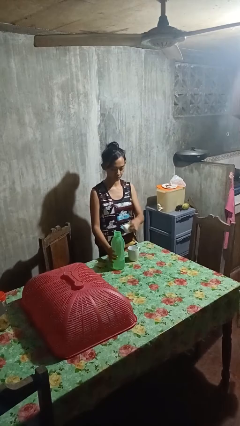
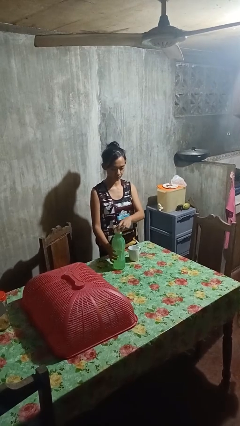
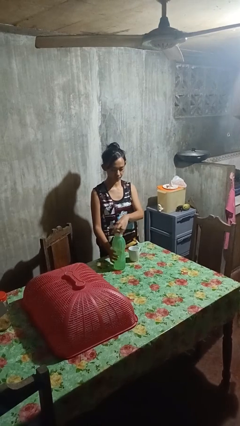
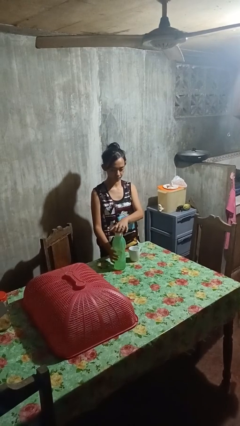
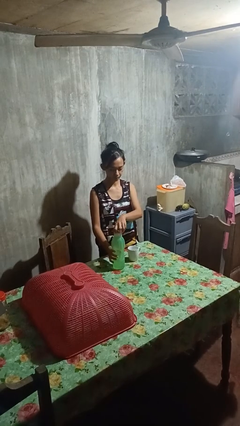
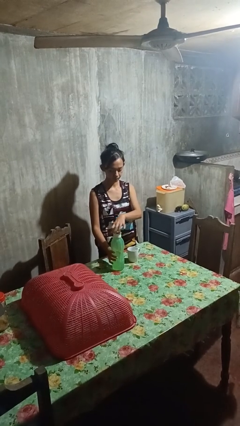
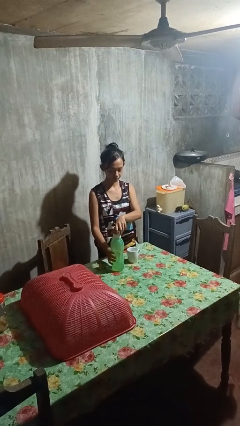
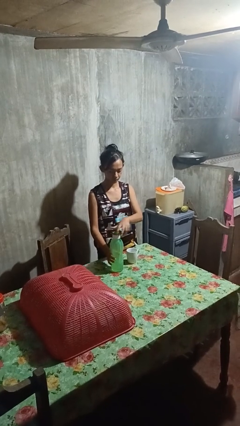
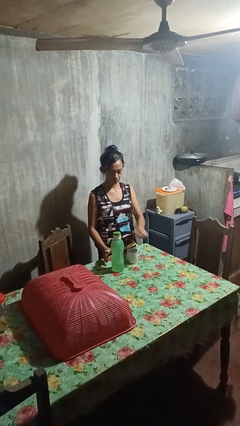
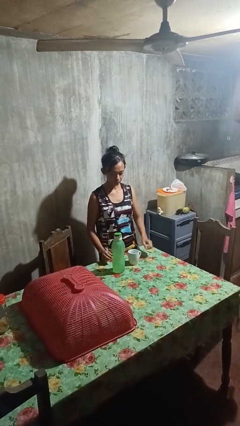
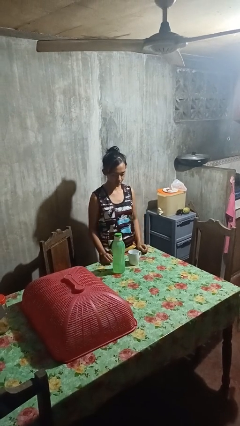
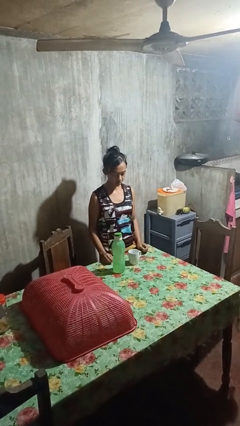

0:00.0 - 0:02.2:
person screws lid to bottle

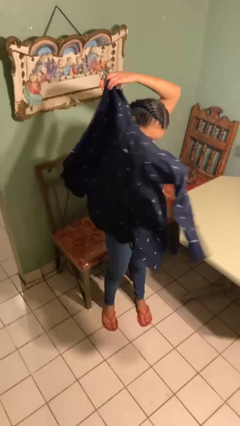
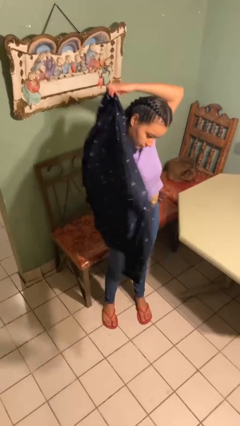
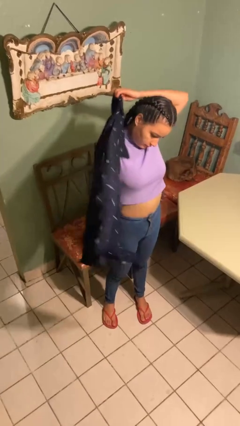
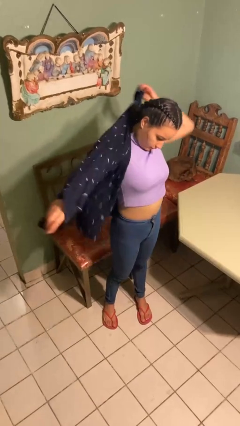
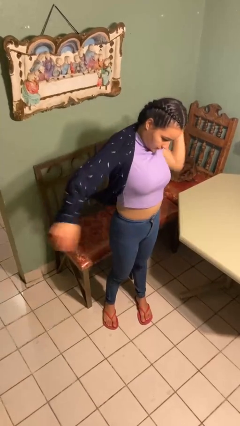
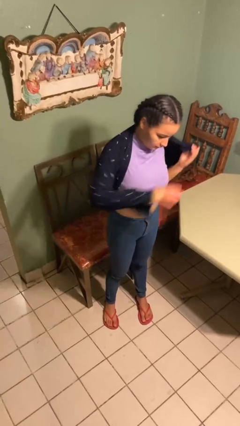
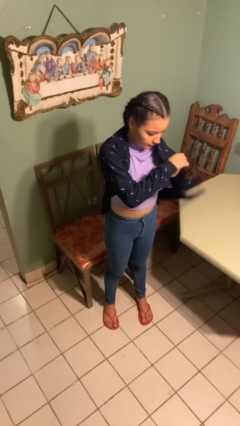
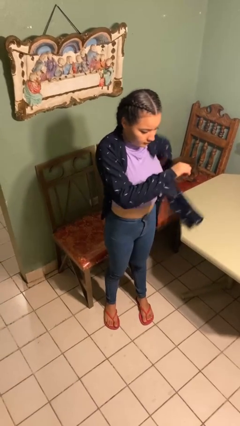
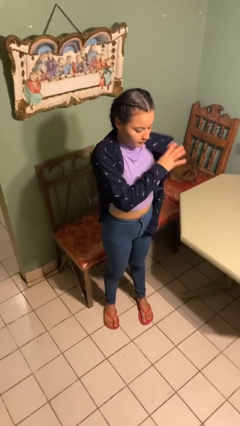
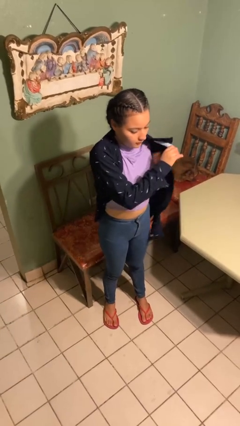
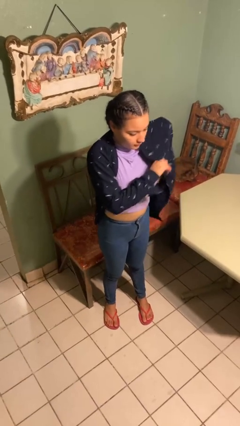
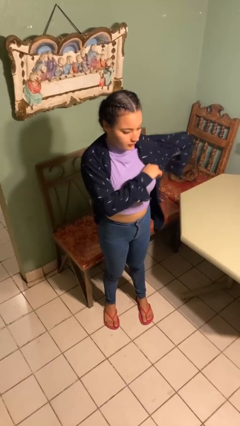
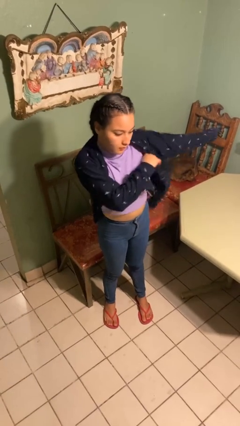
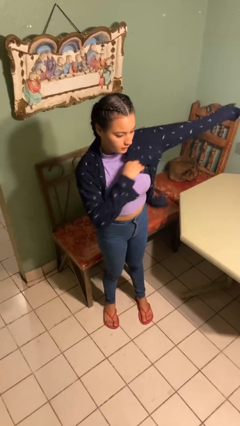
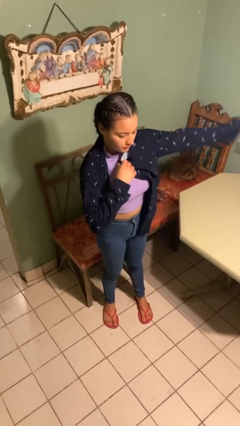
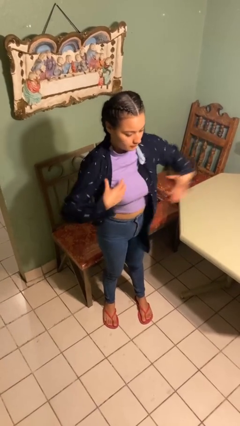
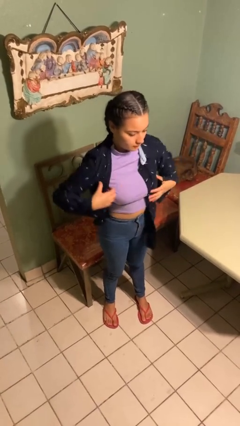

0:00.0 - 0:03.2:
person puts on shirt

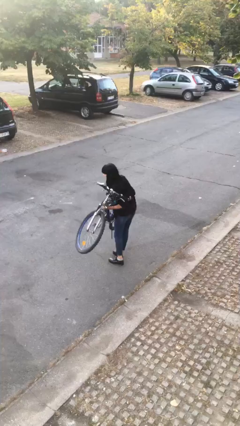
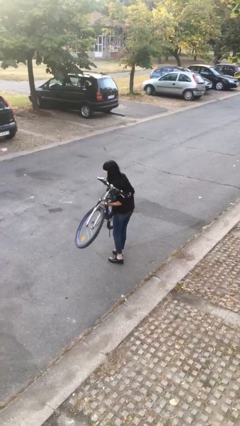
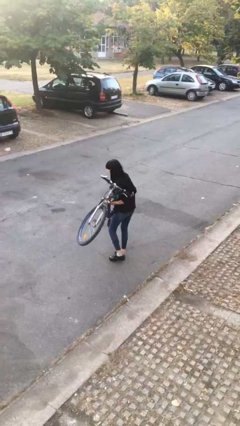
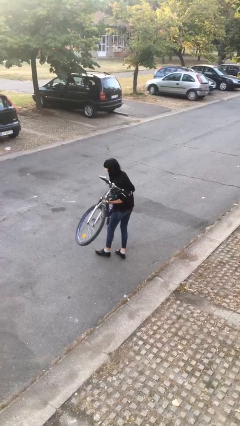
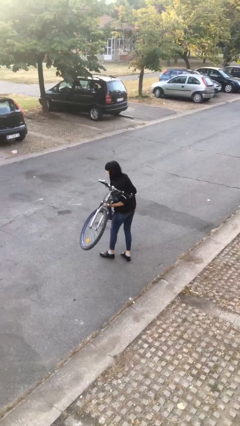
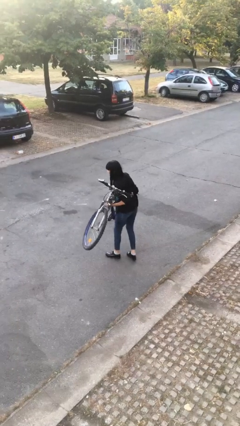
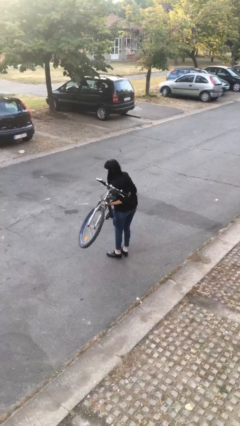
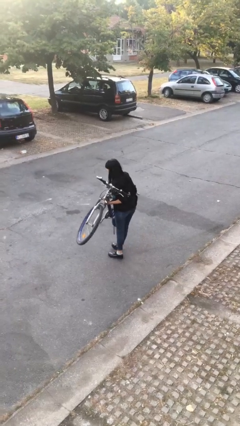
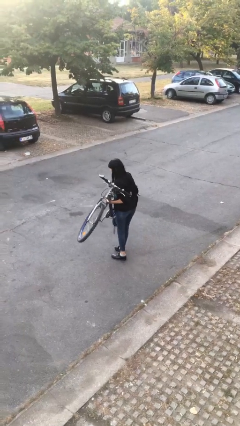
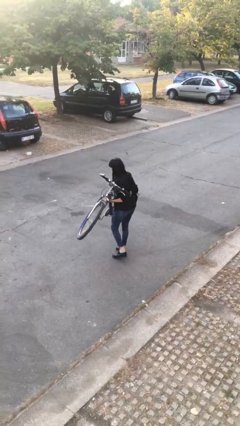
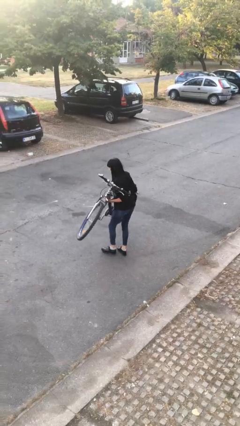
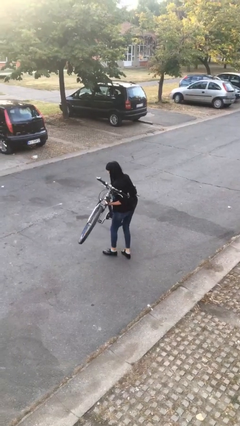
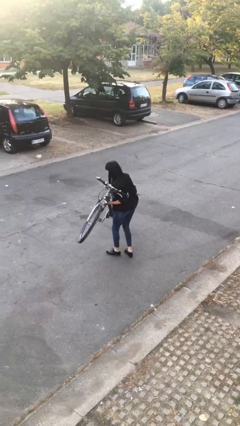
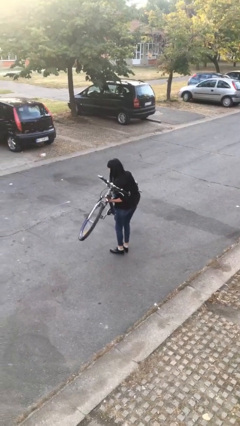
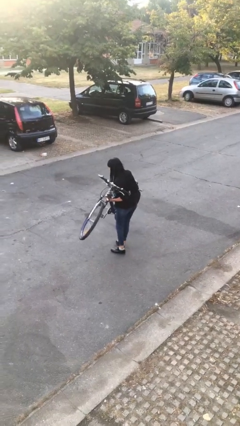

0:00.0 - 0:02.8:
person carries heavy object

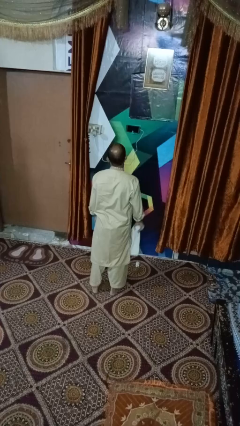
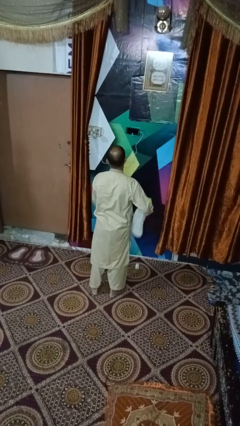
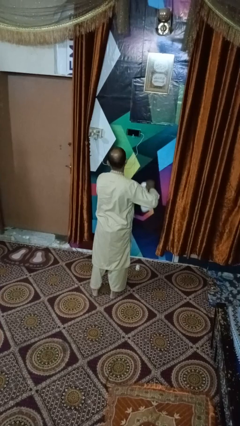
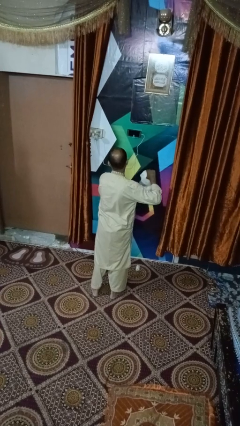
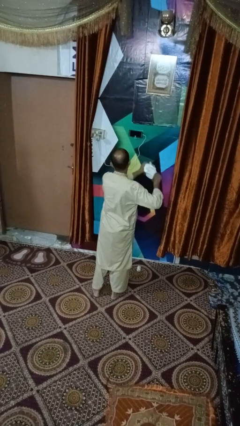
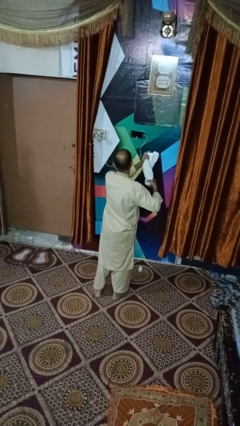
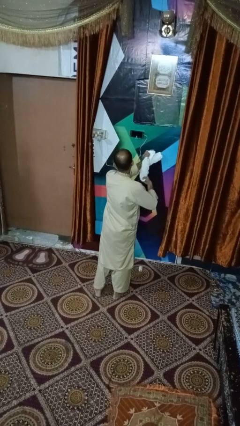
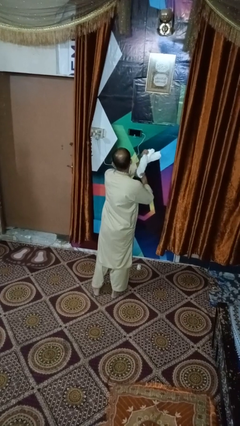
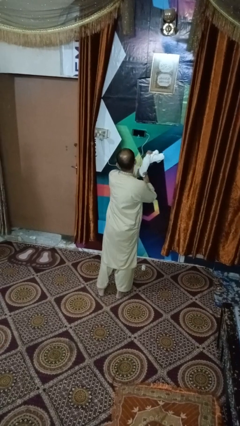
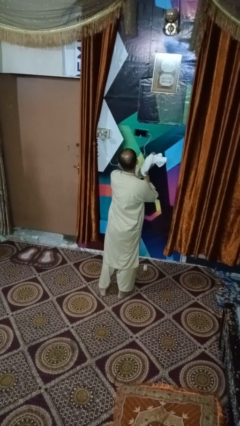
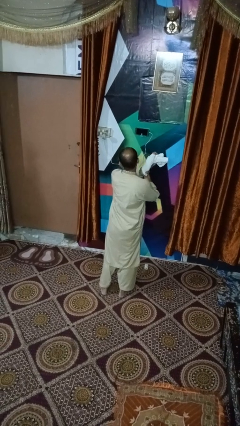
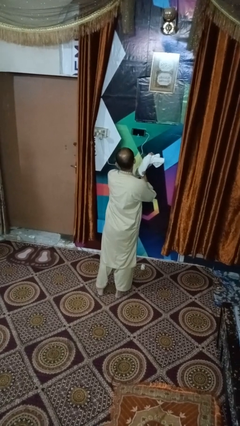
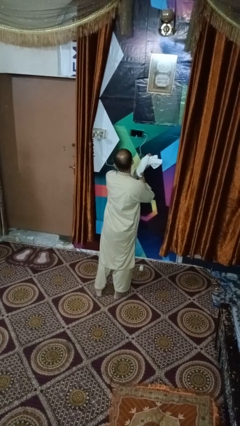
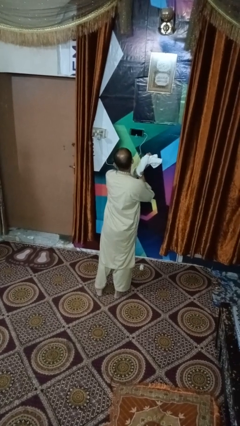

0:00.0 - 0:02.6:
person squeezes object

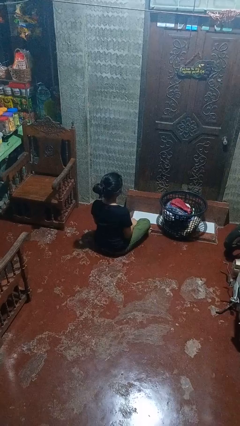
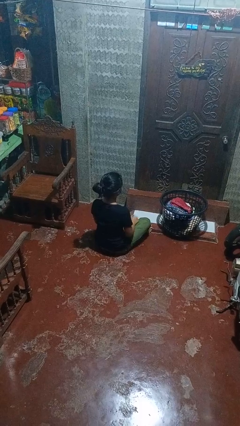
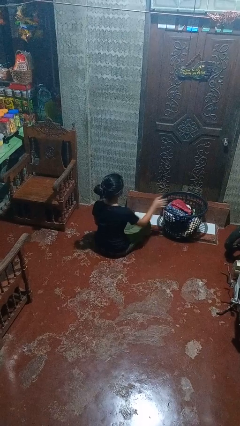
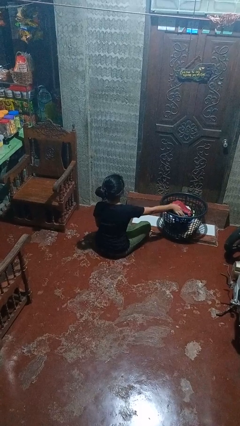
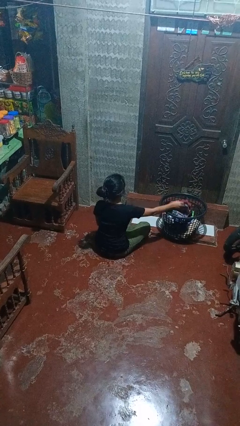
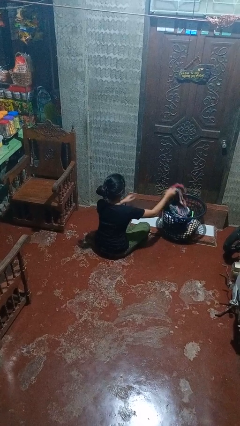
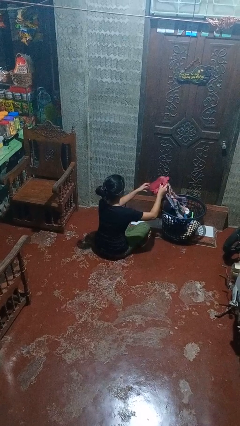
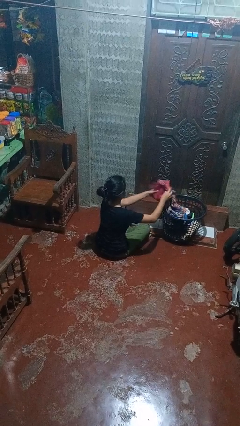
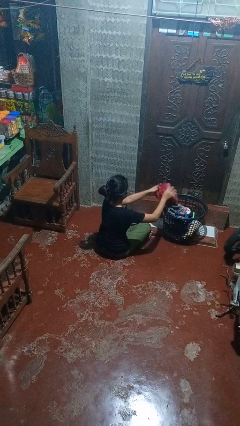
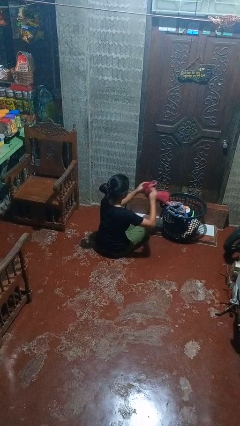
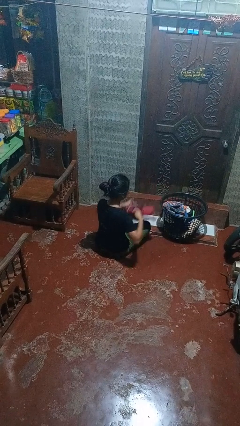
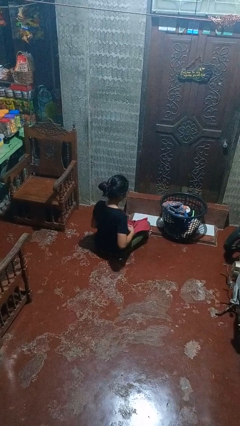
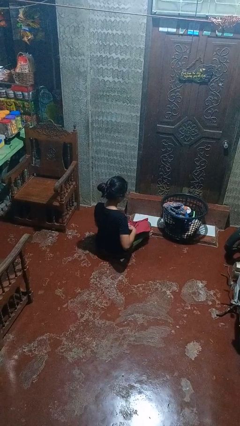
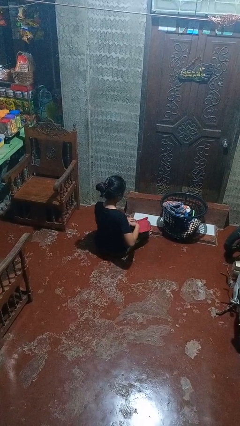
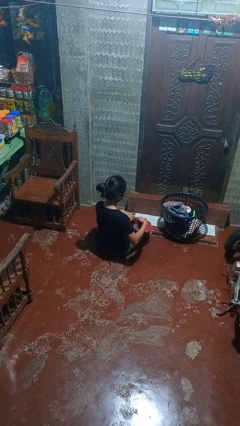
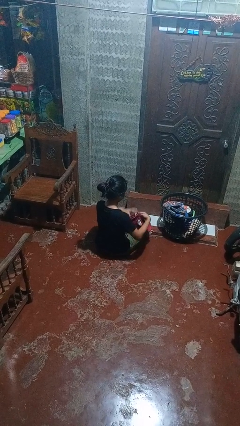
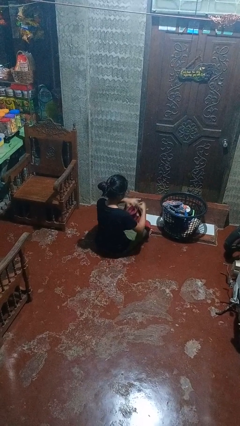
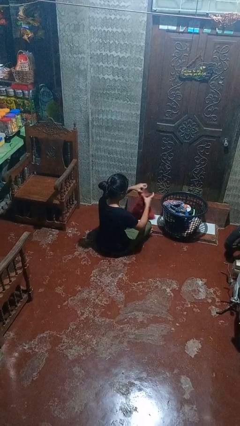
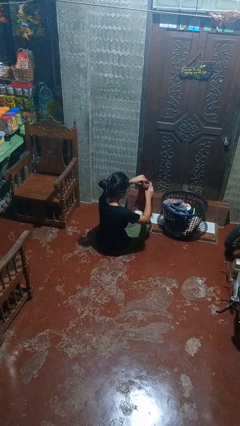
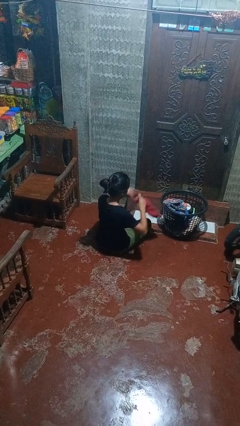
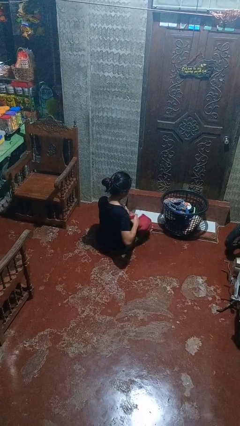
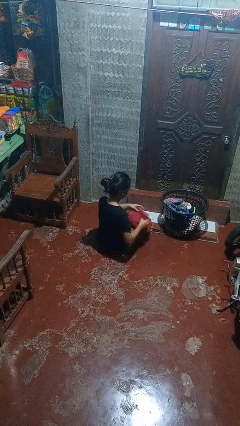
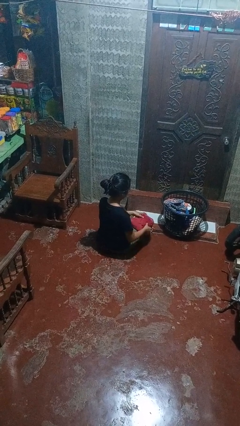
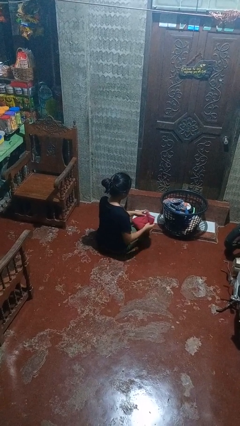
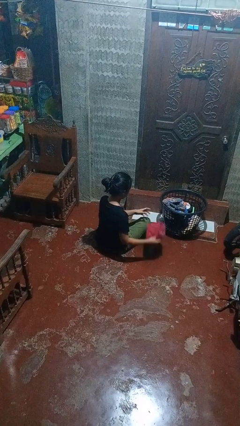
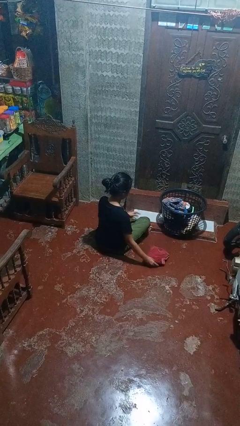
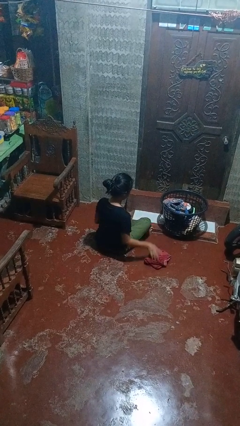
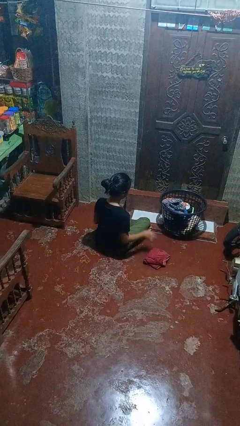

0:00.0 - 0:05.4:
person folds pants

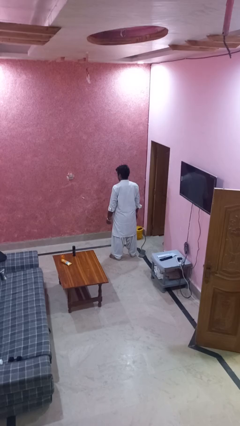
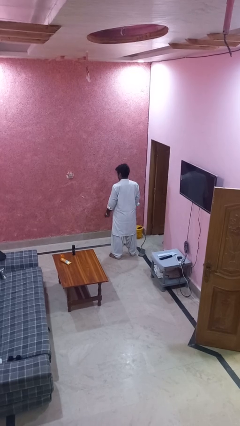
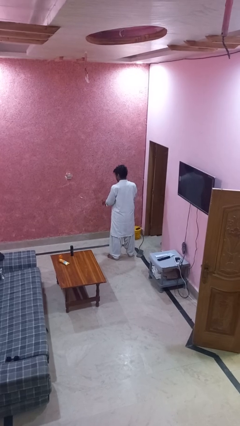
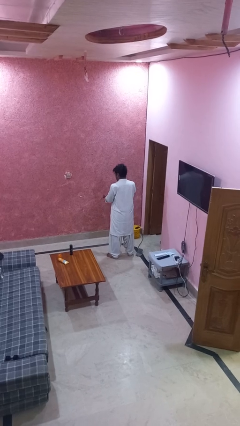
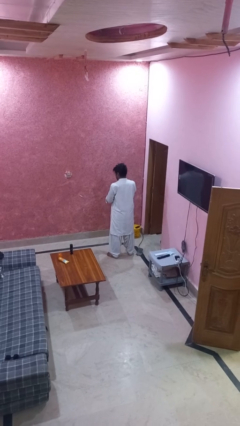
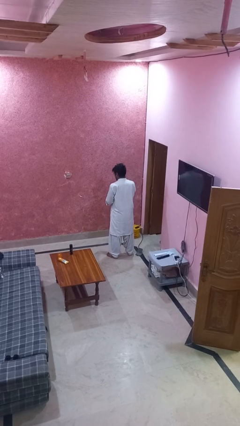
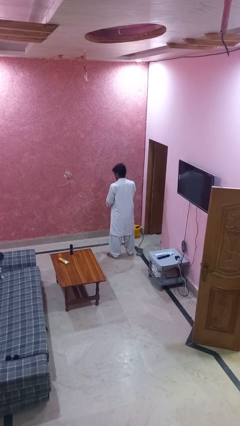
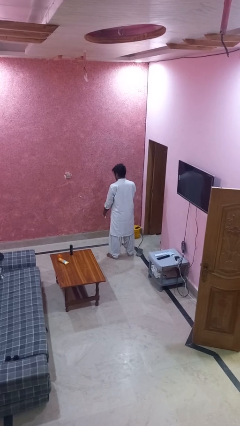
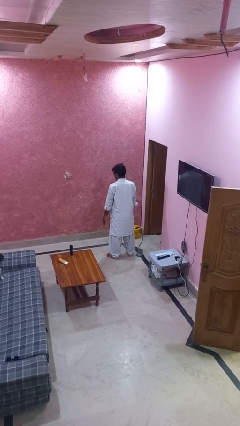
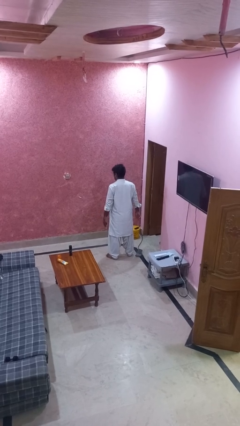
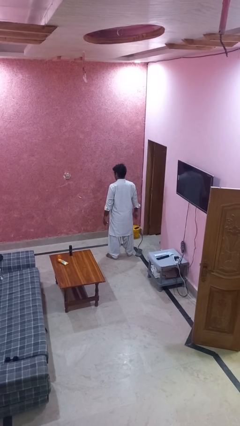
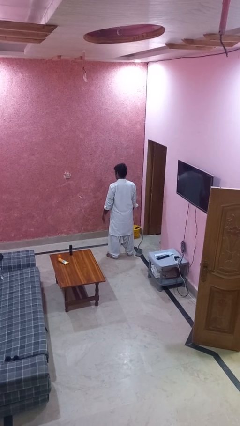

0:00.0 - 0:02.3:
person takes off wristwatch
